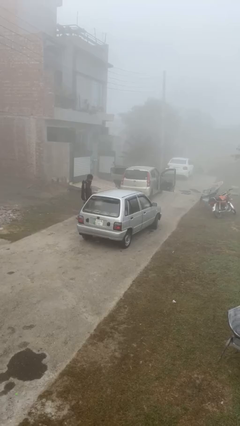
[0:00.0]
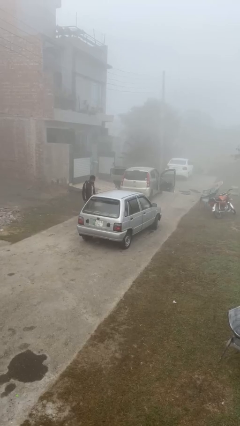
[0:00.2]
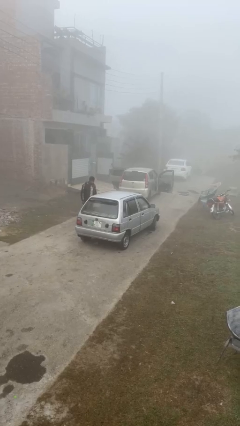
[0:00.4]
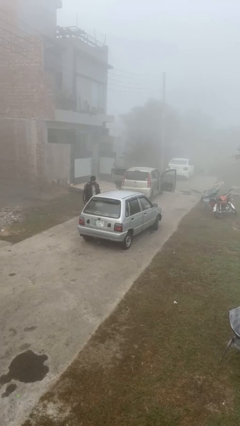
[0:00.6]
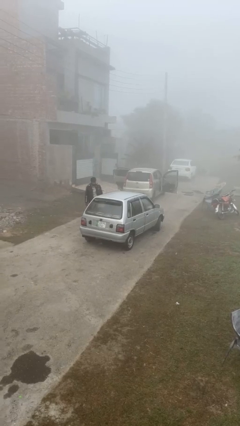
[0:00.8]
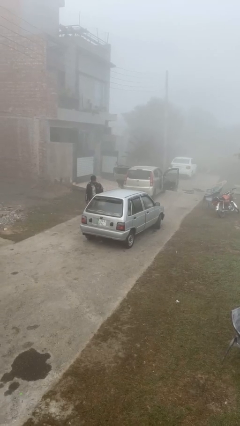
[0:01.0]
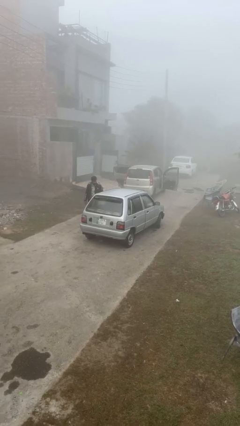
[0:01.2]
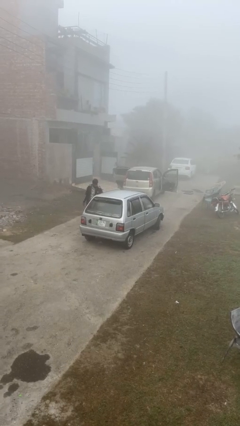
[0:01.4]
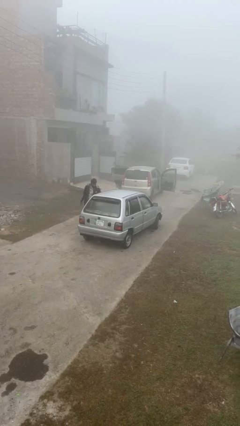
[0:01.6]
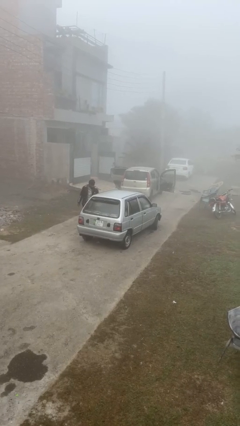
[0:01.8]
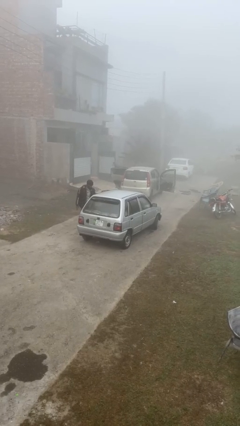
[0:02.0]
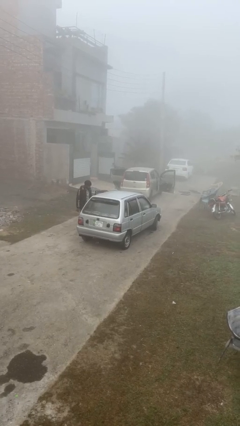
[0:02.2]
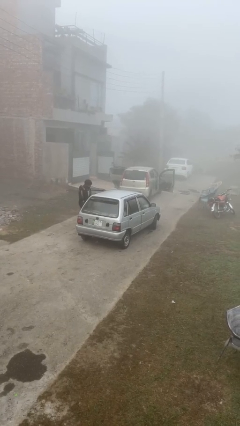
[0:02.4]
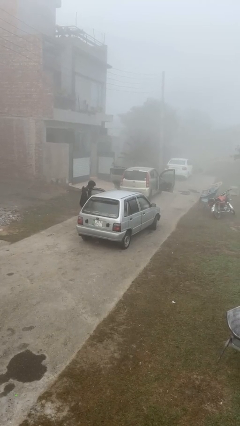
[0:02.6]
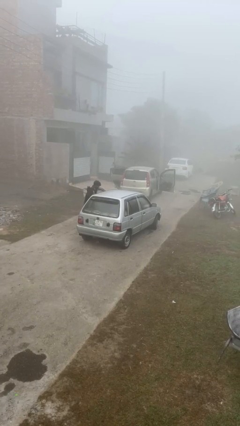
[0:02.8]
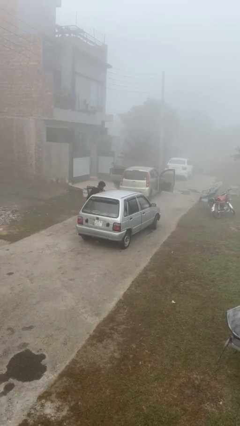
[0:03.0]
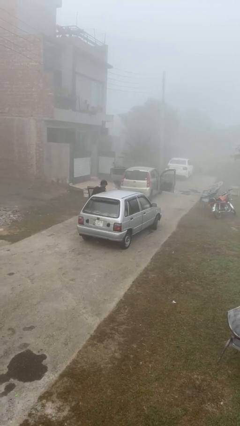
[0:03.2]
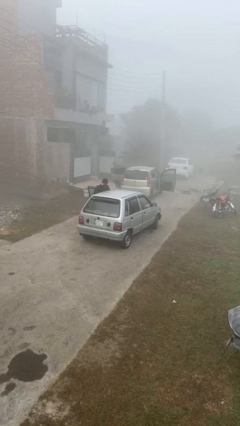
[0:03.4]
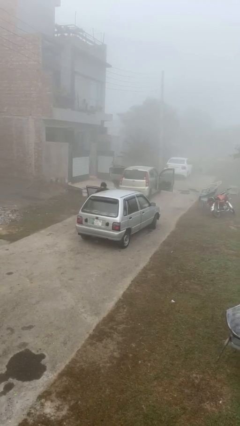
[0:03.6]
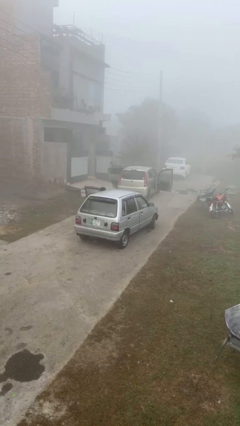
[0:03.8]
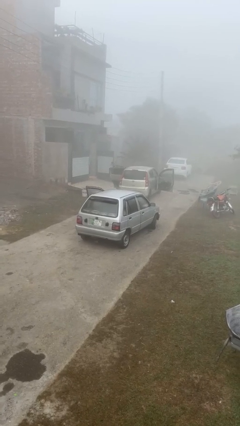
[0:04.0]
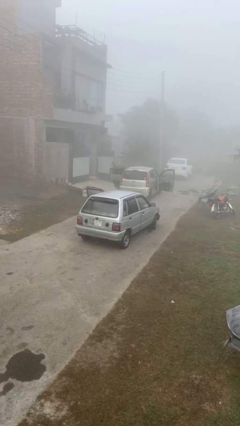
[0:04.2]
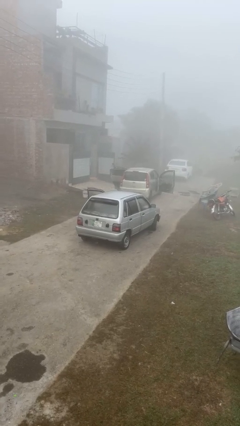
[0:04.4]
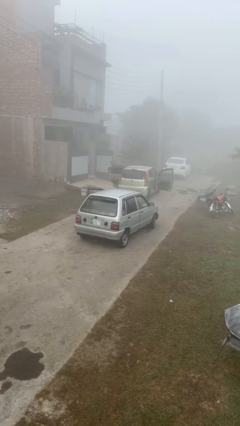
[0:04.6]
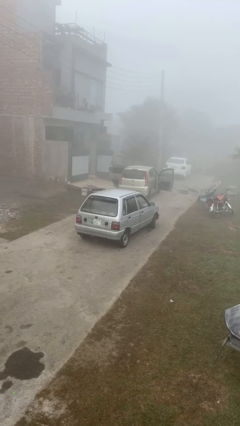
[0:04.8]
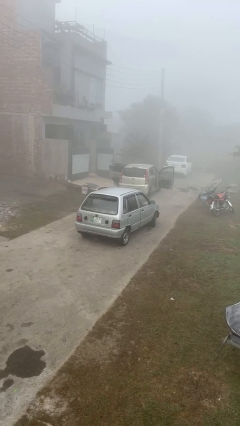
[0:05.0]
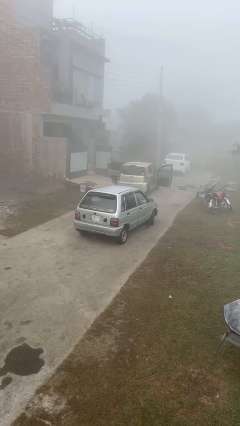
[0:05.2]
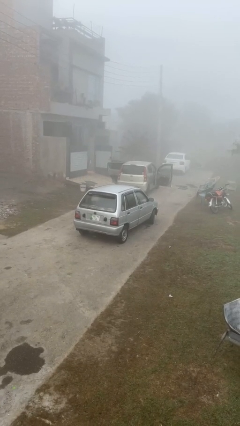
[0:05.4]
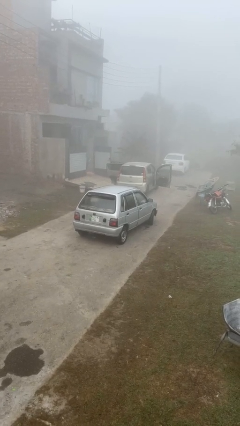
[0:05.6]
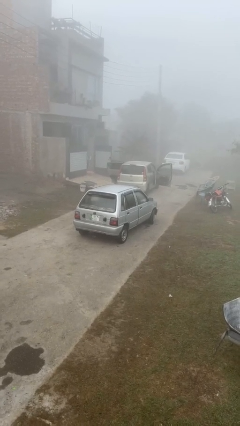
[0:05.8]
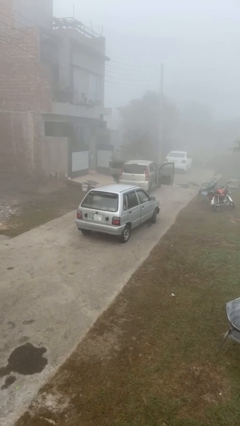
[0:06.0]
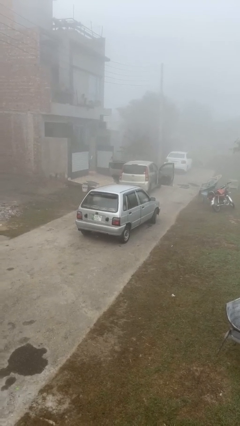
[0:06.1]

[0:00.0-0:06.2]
car picks up person

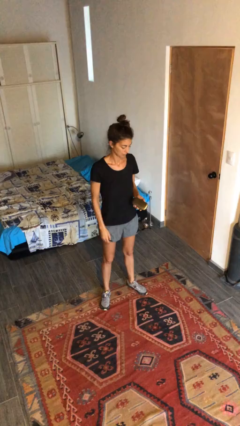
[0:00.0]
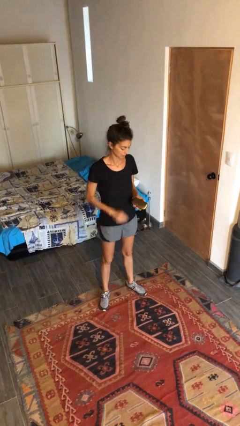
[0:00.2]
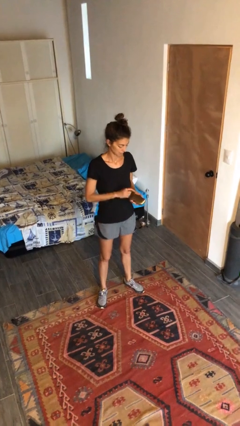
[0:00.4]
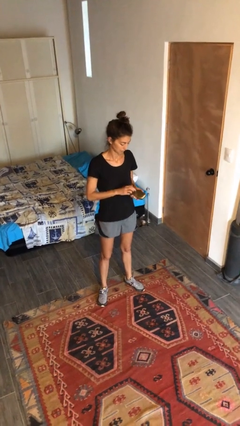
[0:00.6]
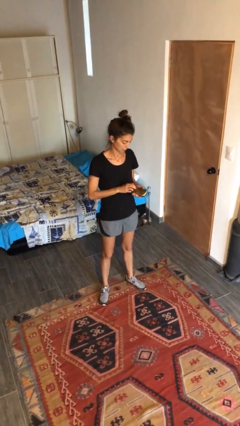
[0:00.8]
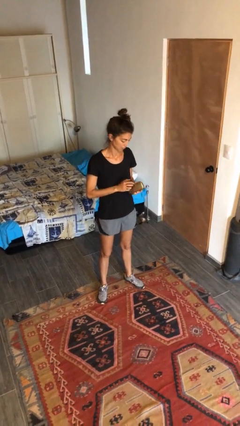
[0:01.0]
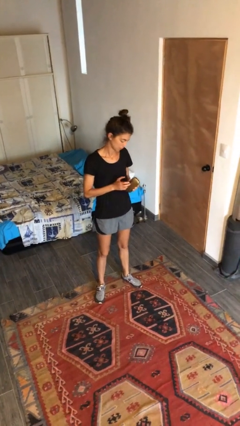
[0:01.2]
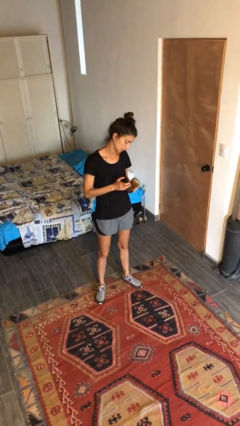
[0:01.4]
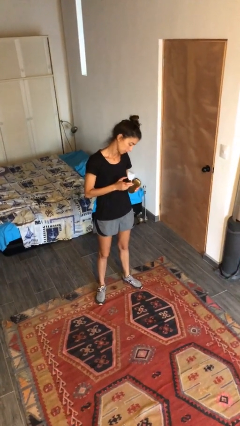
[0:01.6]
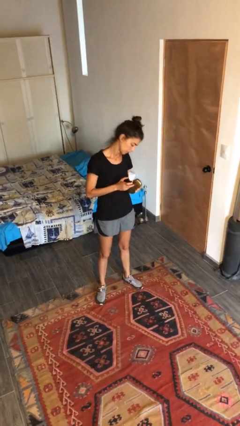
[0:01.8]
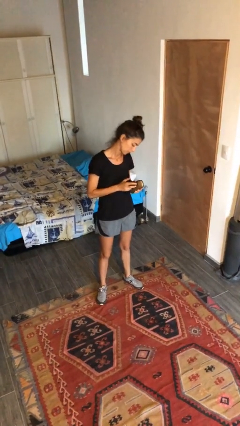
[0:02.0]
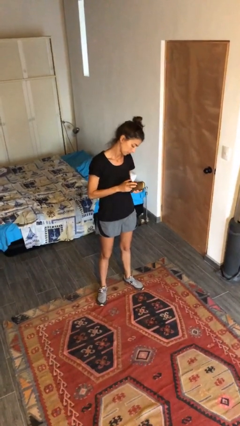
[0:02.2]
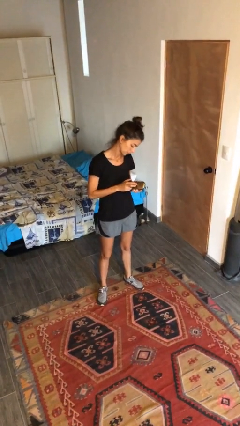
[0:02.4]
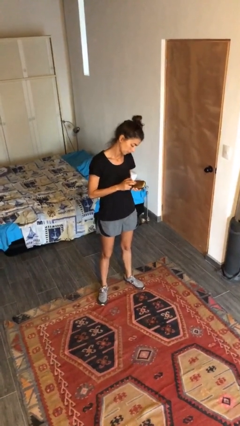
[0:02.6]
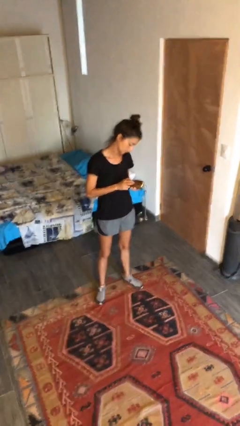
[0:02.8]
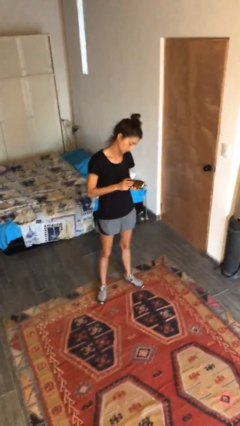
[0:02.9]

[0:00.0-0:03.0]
person taps object with finger

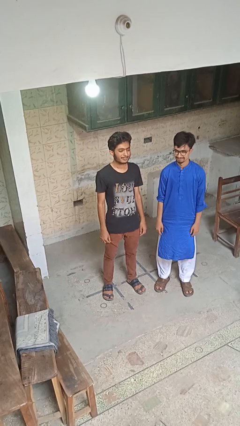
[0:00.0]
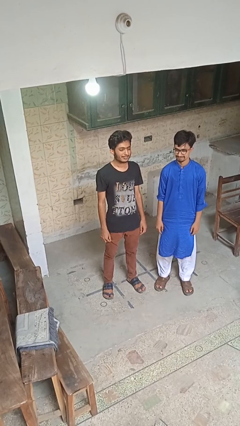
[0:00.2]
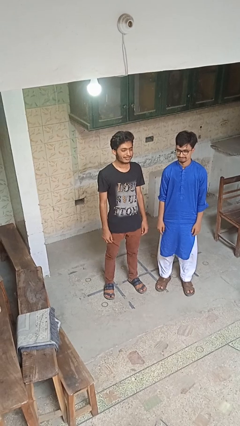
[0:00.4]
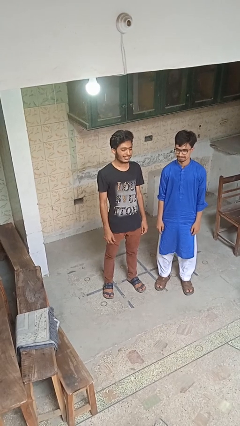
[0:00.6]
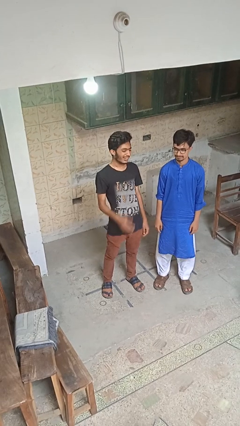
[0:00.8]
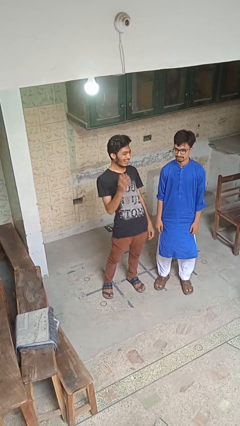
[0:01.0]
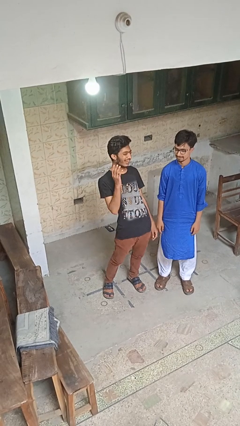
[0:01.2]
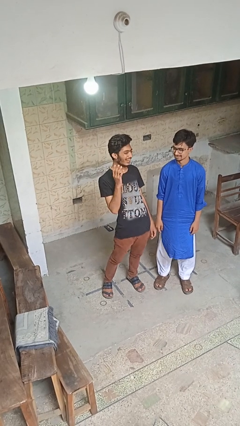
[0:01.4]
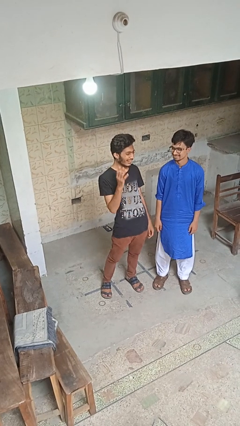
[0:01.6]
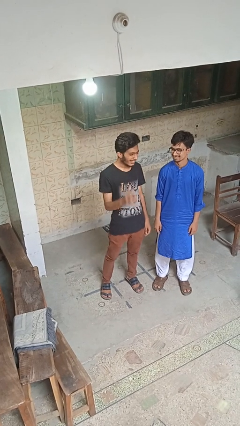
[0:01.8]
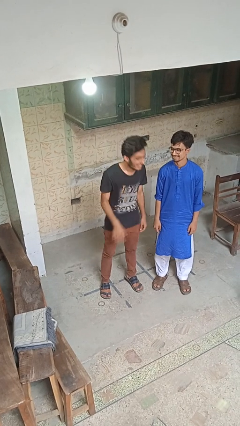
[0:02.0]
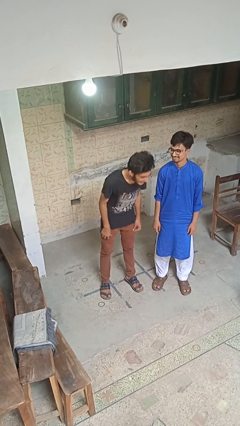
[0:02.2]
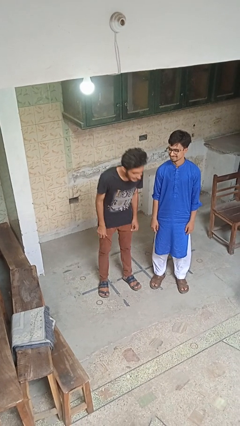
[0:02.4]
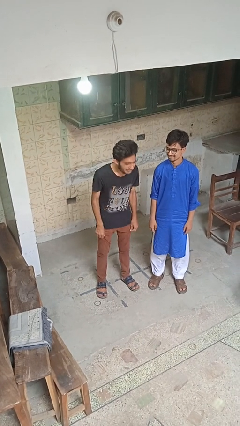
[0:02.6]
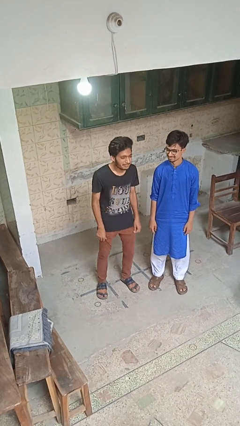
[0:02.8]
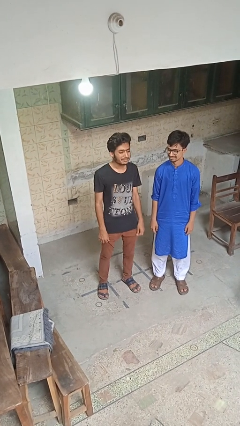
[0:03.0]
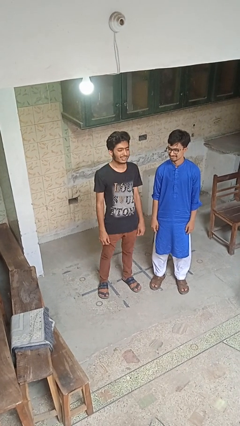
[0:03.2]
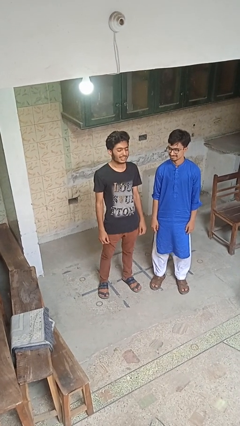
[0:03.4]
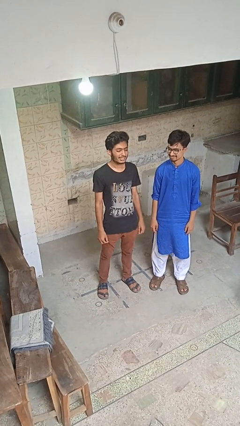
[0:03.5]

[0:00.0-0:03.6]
person laughs with person

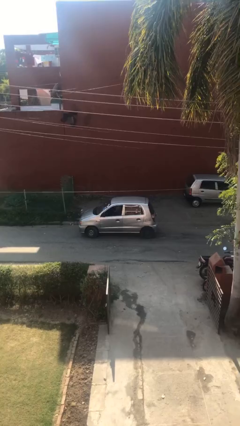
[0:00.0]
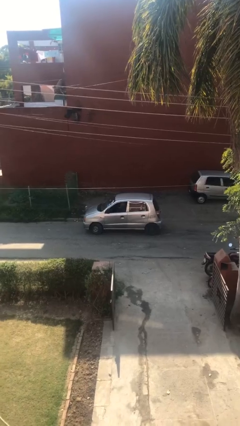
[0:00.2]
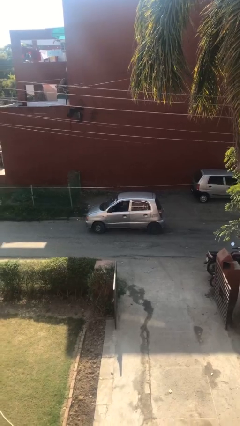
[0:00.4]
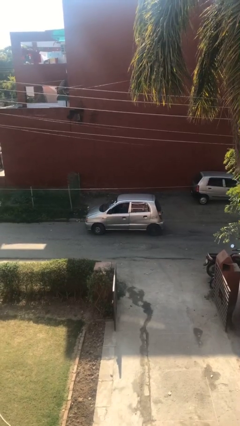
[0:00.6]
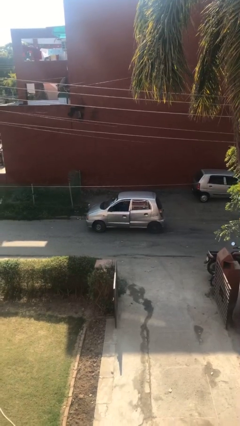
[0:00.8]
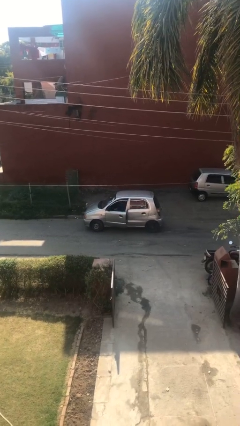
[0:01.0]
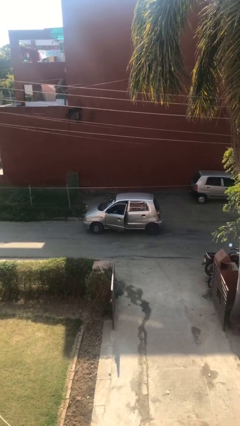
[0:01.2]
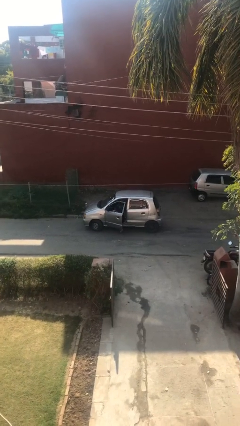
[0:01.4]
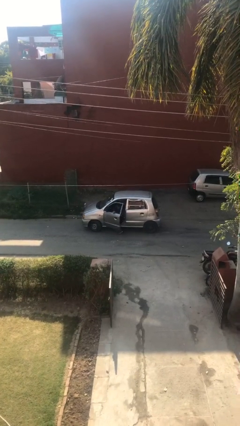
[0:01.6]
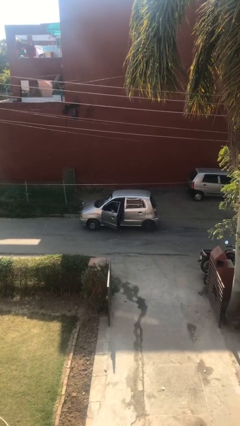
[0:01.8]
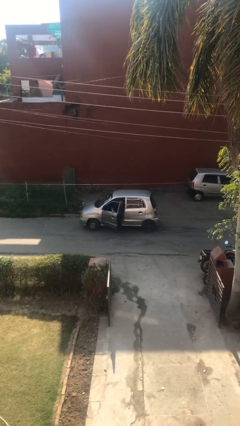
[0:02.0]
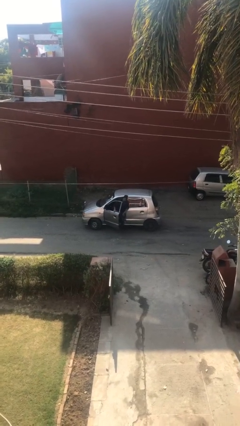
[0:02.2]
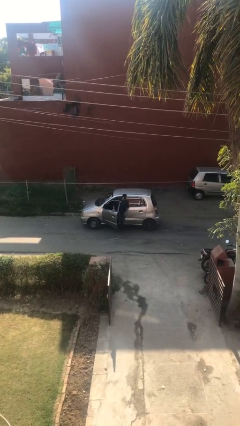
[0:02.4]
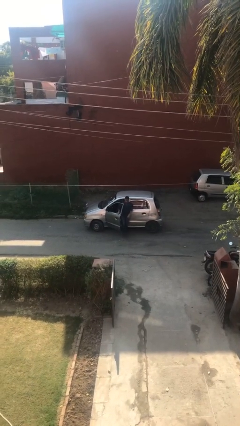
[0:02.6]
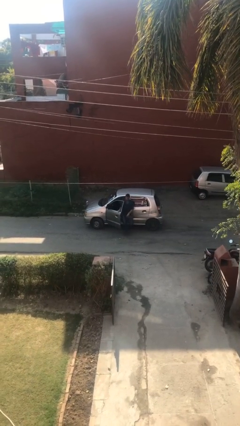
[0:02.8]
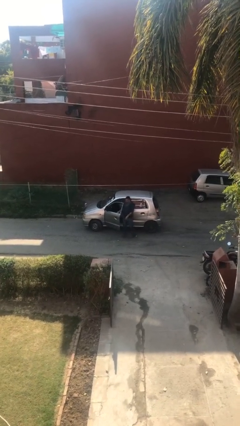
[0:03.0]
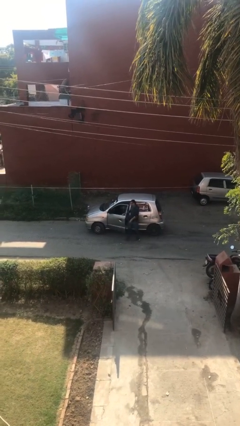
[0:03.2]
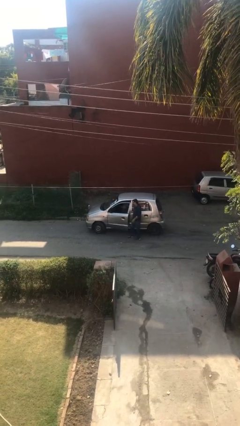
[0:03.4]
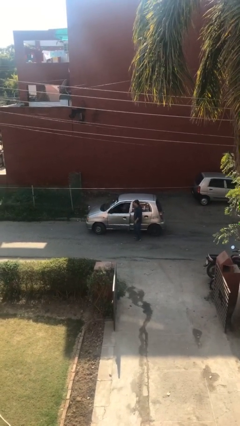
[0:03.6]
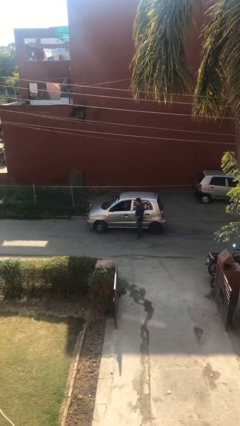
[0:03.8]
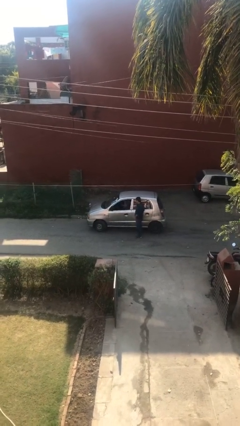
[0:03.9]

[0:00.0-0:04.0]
car drops off person

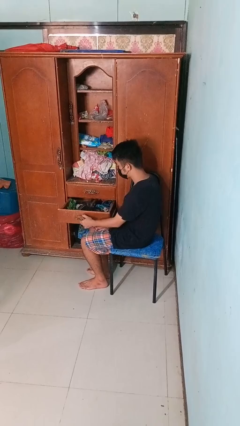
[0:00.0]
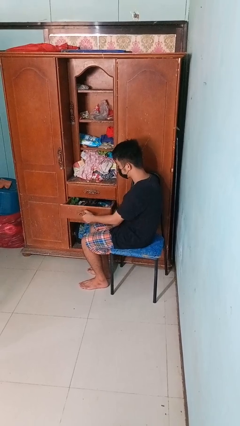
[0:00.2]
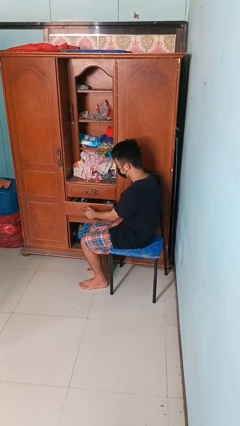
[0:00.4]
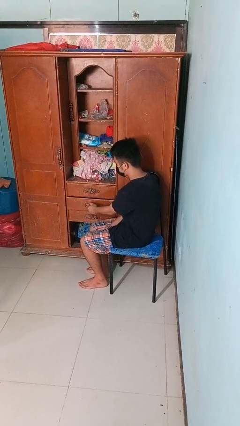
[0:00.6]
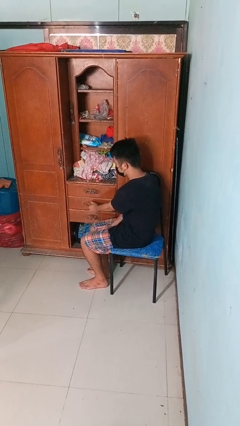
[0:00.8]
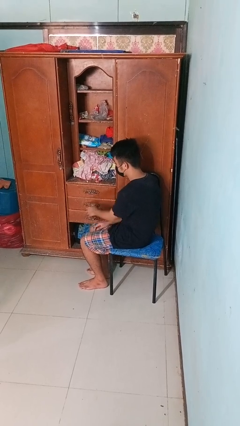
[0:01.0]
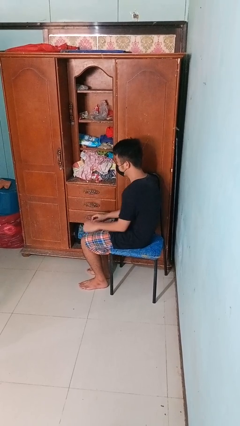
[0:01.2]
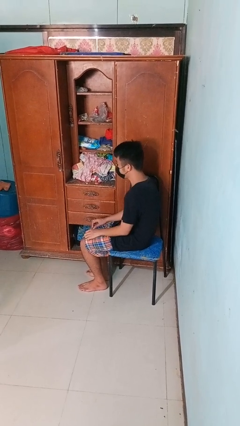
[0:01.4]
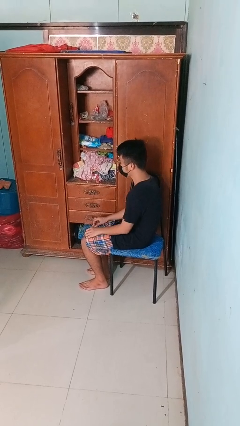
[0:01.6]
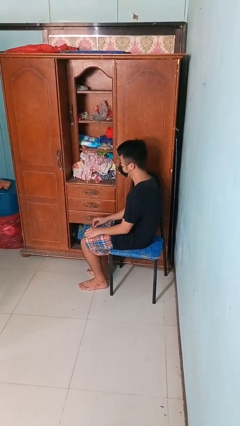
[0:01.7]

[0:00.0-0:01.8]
person closes dresser drawer
